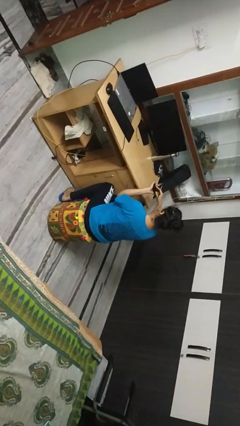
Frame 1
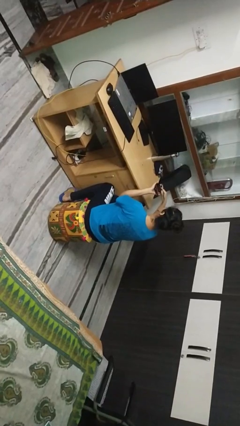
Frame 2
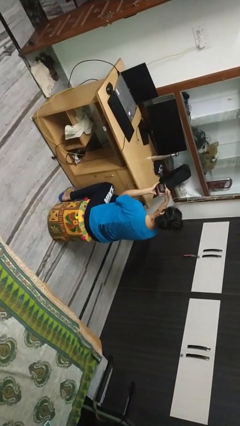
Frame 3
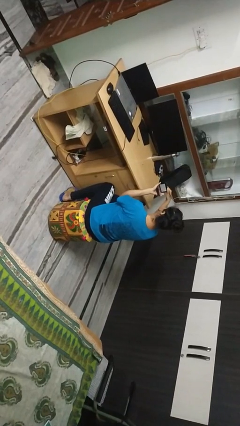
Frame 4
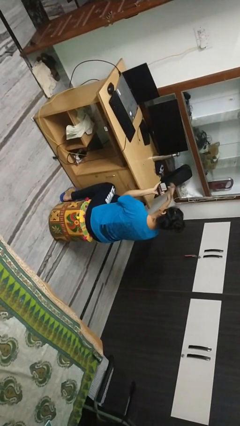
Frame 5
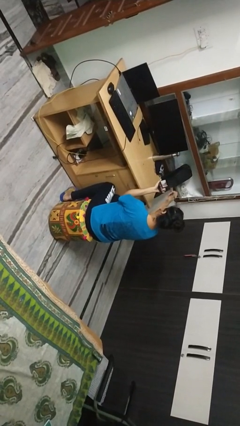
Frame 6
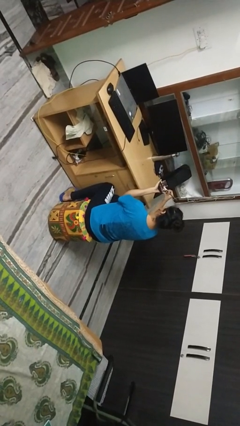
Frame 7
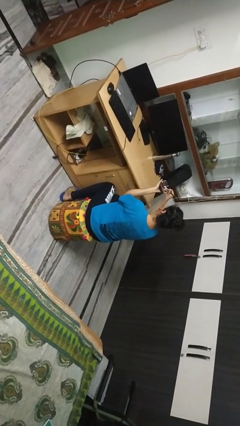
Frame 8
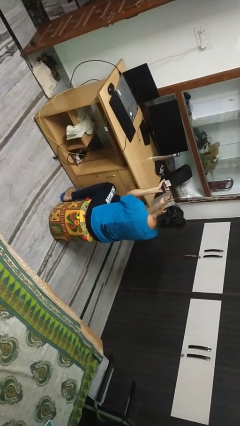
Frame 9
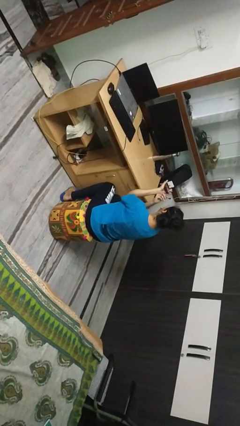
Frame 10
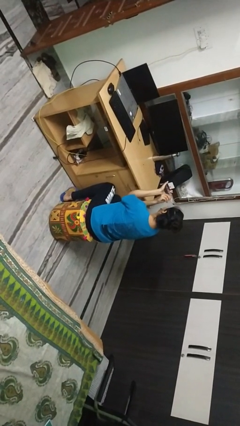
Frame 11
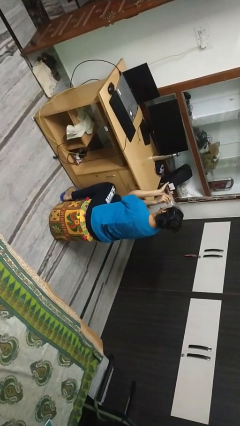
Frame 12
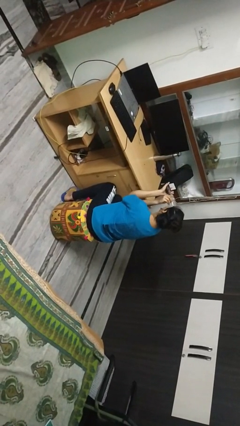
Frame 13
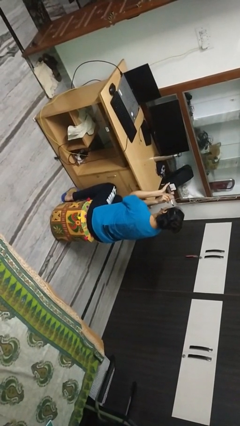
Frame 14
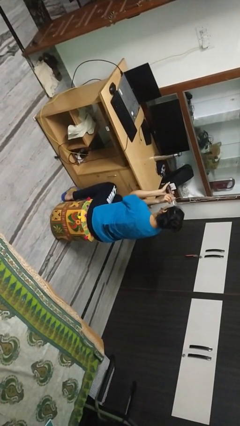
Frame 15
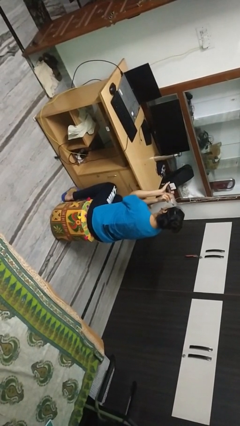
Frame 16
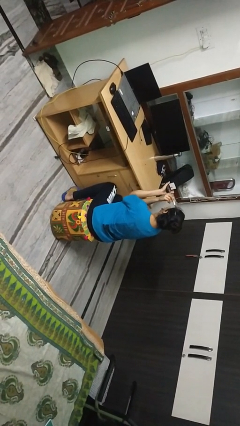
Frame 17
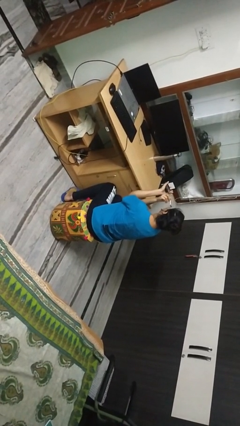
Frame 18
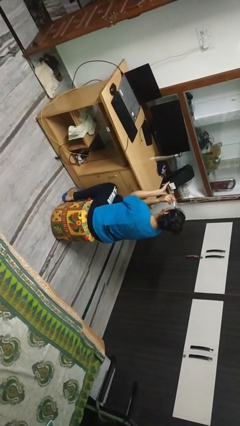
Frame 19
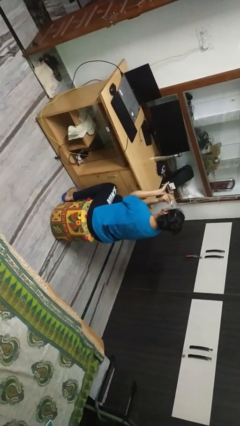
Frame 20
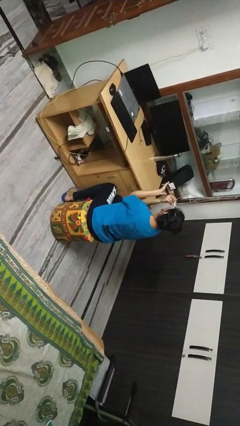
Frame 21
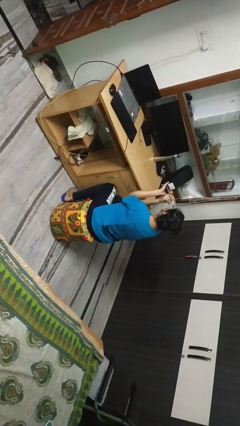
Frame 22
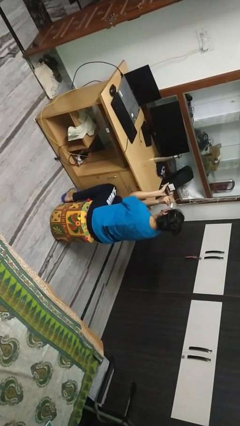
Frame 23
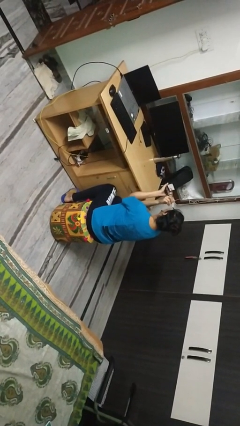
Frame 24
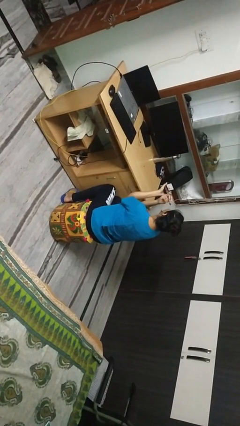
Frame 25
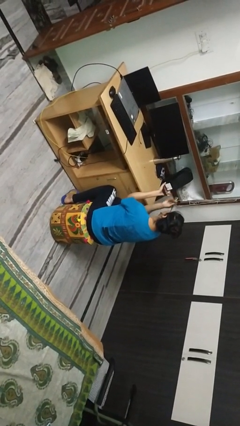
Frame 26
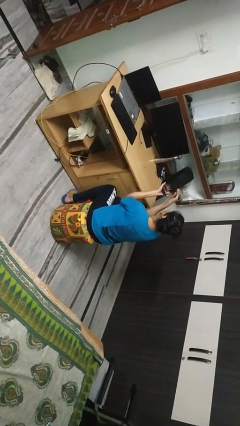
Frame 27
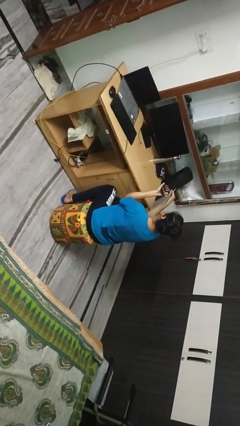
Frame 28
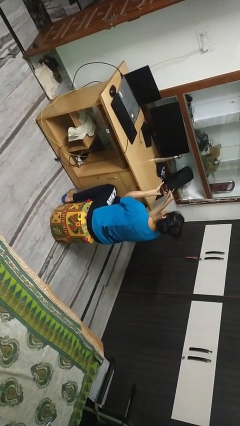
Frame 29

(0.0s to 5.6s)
person applies eye makeup

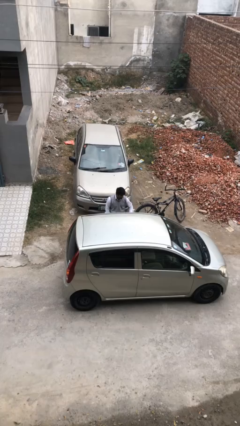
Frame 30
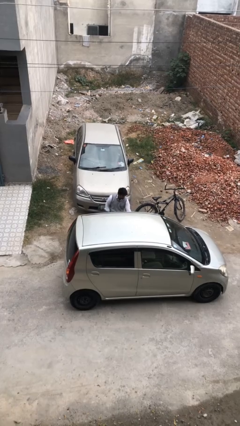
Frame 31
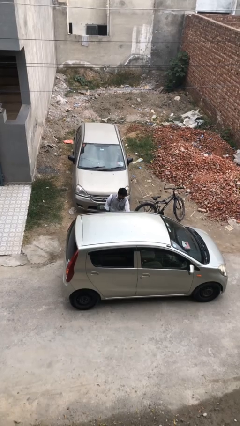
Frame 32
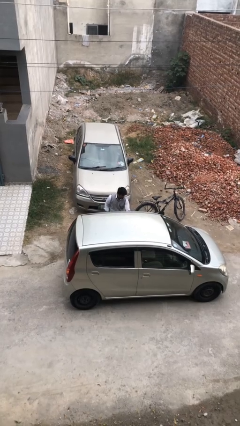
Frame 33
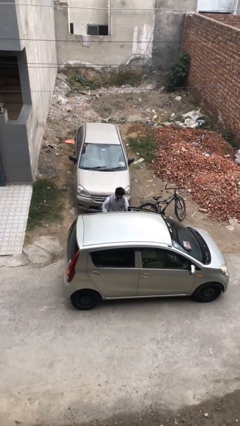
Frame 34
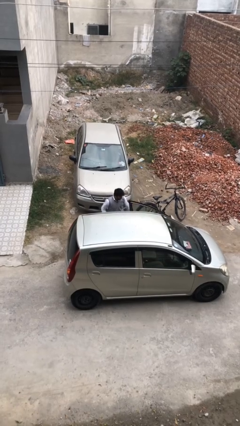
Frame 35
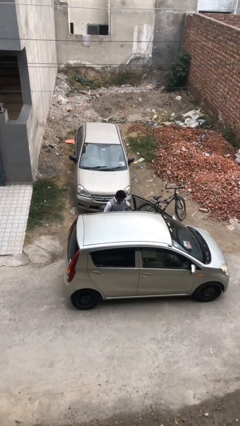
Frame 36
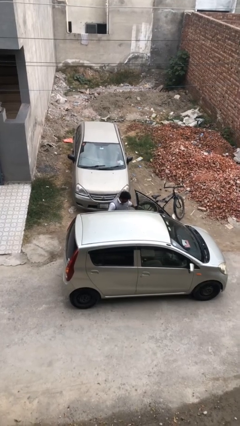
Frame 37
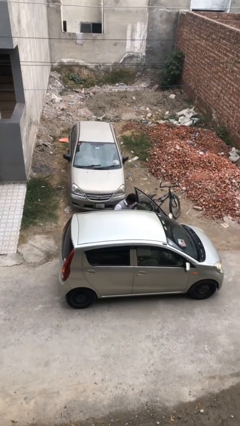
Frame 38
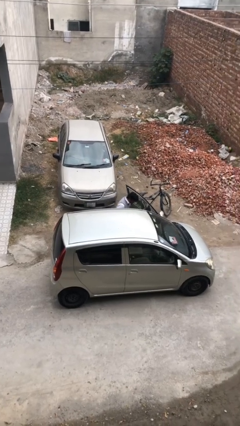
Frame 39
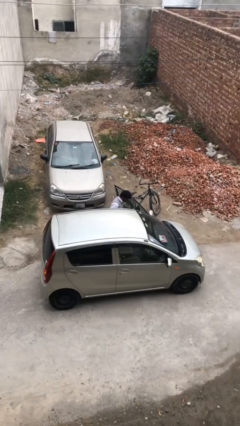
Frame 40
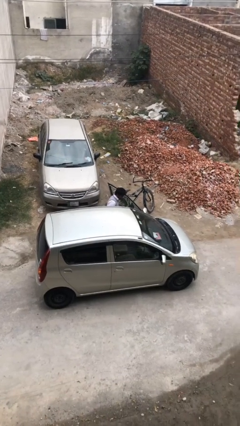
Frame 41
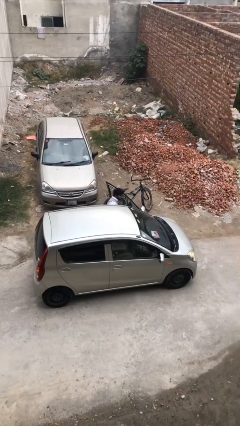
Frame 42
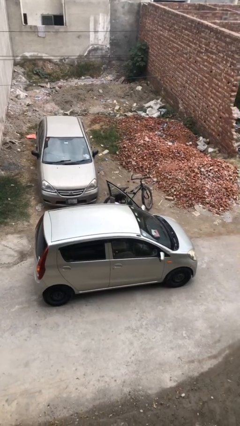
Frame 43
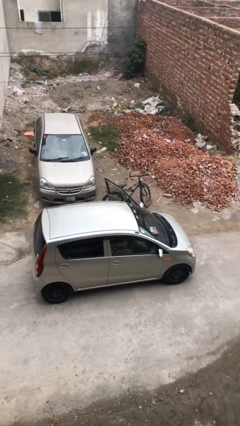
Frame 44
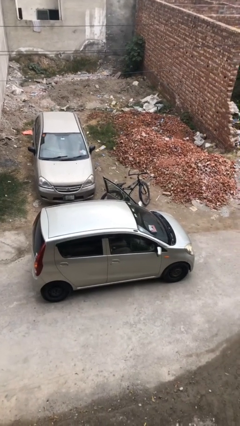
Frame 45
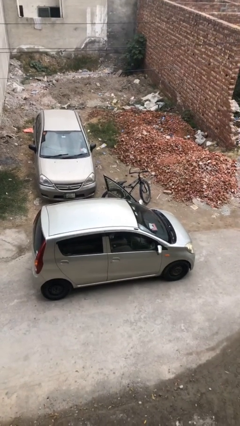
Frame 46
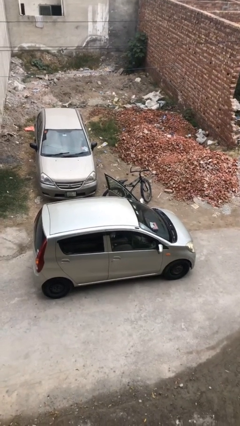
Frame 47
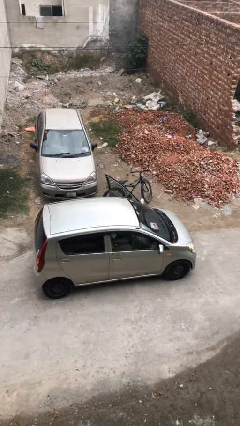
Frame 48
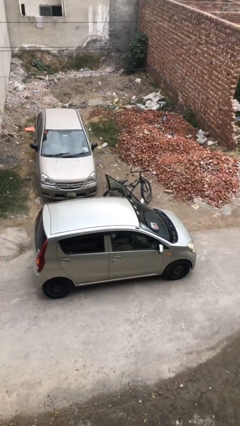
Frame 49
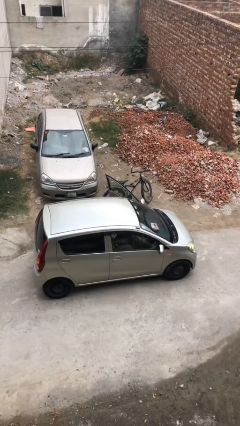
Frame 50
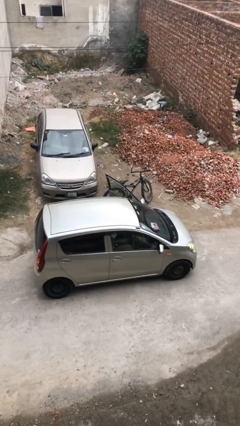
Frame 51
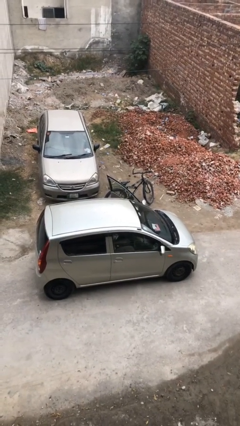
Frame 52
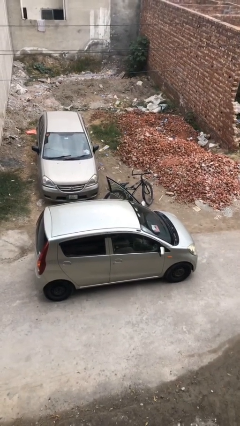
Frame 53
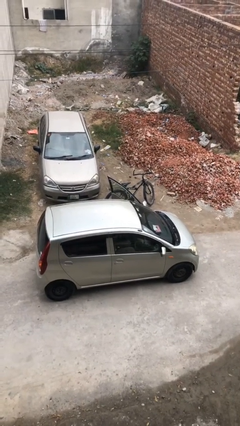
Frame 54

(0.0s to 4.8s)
person enters car

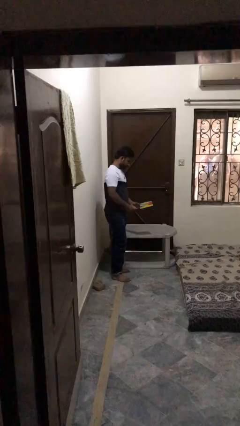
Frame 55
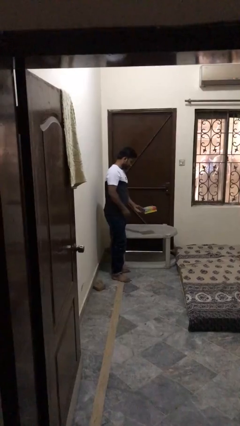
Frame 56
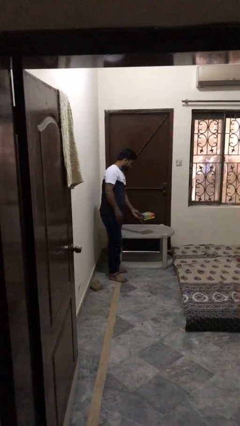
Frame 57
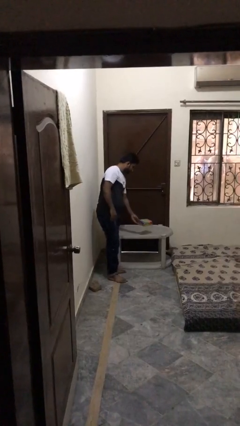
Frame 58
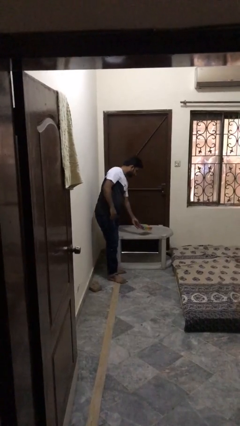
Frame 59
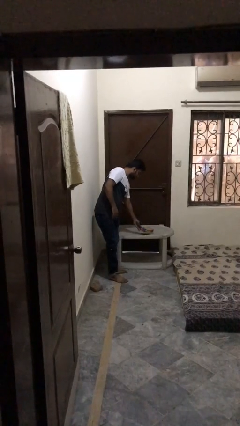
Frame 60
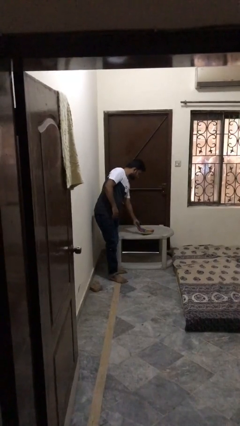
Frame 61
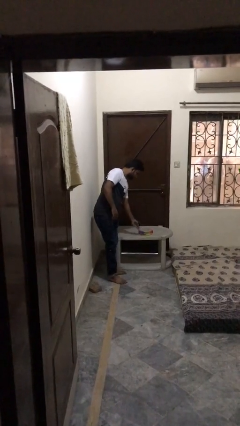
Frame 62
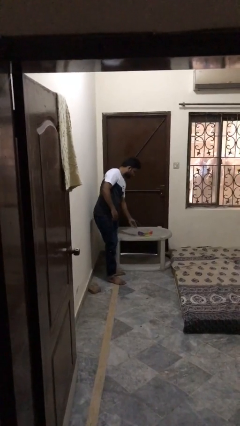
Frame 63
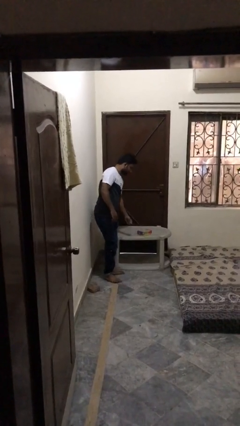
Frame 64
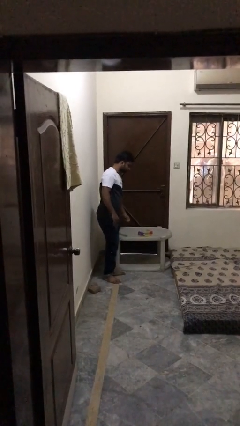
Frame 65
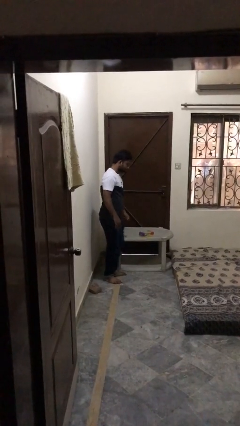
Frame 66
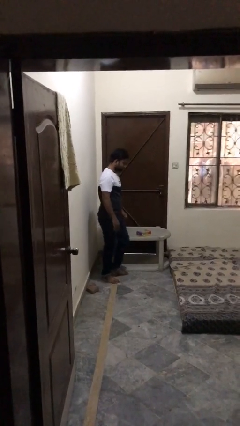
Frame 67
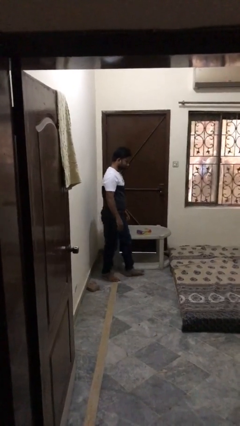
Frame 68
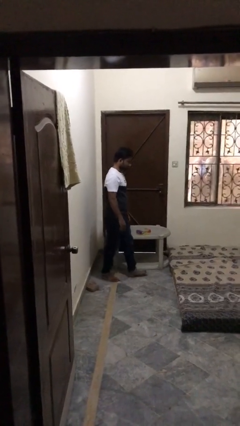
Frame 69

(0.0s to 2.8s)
person puts down object on table

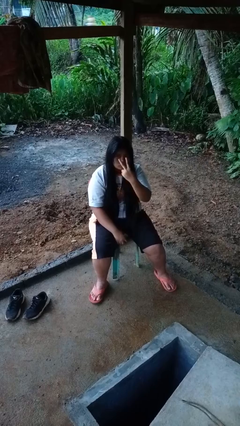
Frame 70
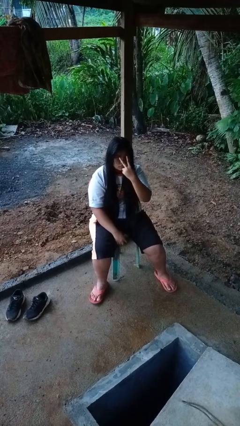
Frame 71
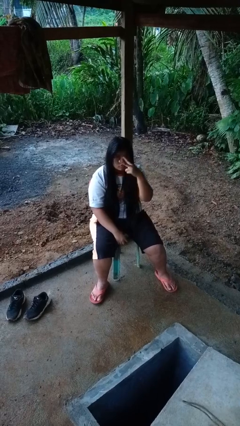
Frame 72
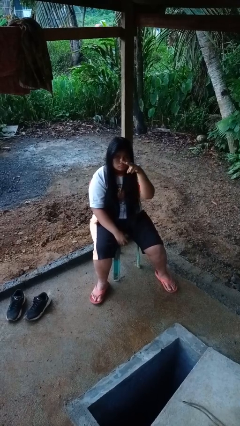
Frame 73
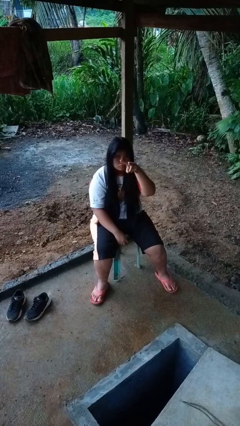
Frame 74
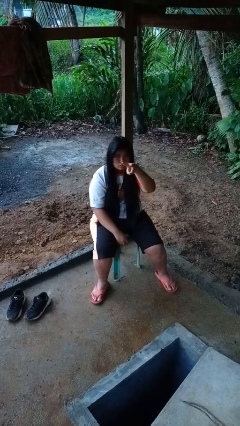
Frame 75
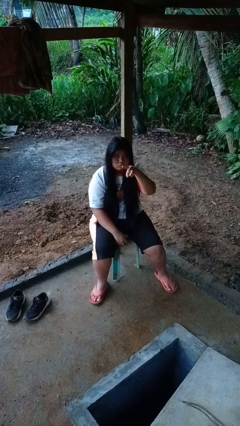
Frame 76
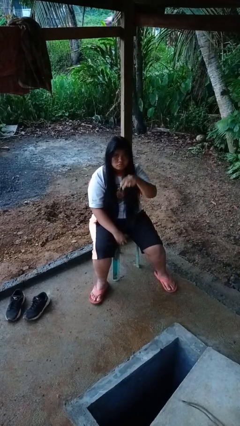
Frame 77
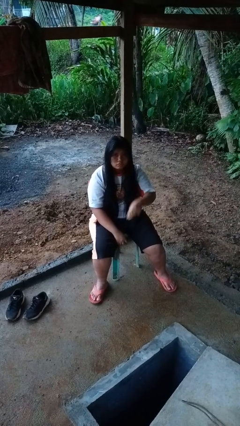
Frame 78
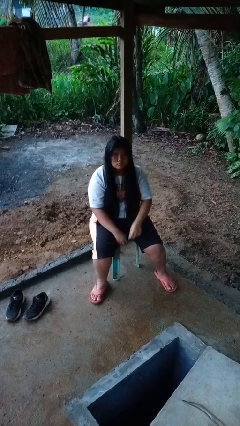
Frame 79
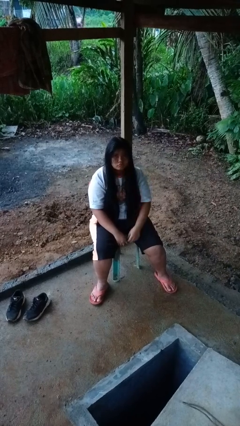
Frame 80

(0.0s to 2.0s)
person gestures watch closely

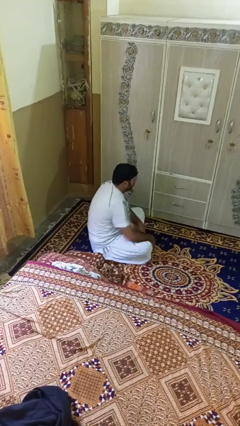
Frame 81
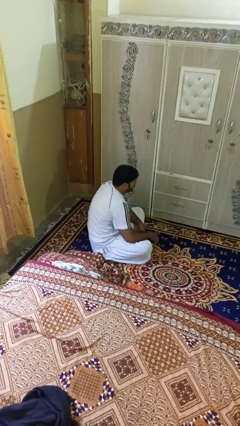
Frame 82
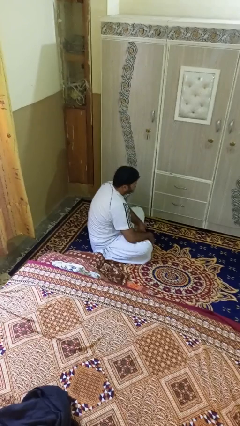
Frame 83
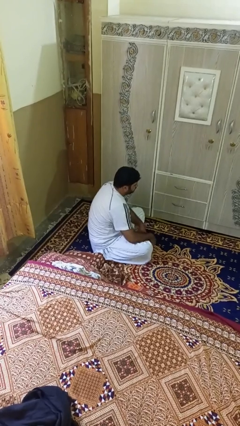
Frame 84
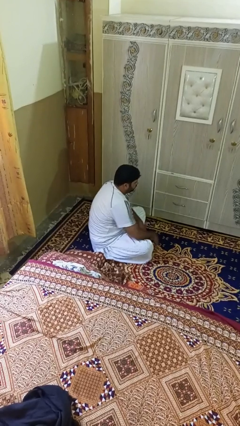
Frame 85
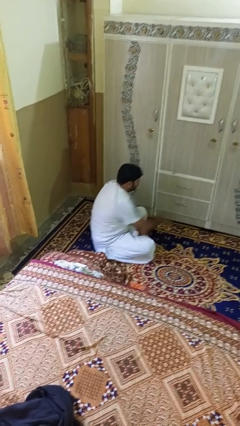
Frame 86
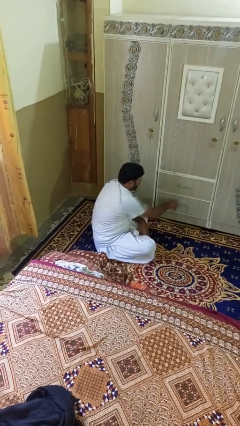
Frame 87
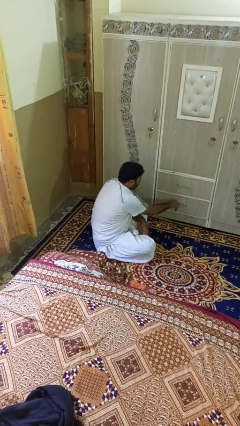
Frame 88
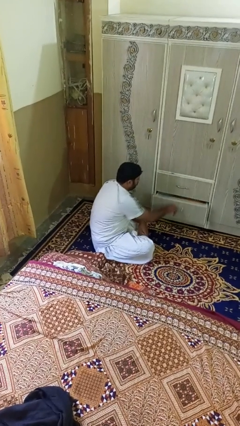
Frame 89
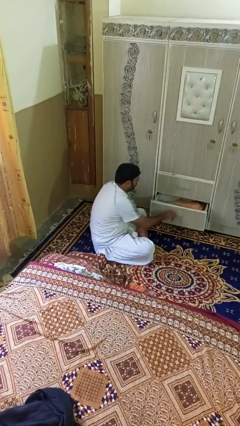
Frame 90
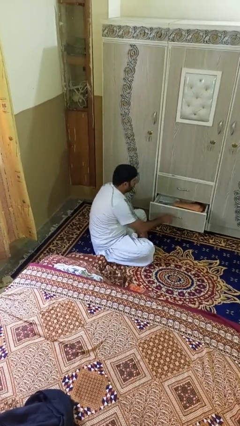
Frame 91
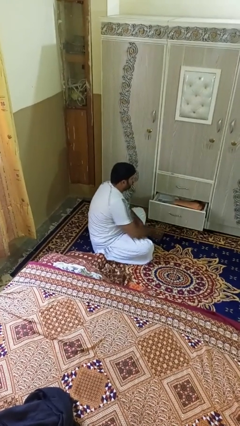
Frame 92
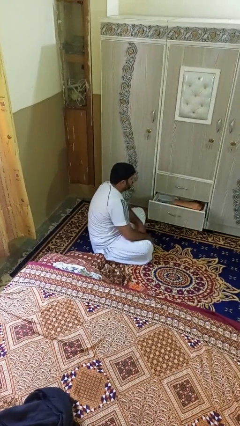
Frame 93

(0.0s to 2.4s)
person opens dresser drawer
